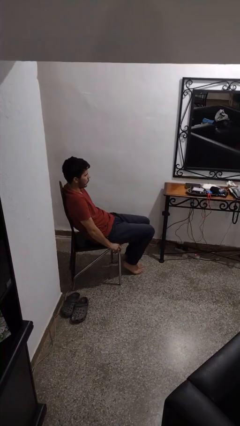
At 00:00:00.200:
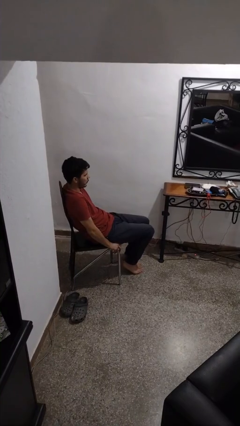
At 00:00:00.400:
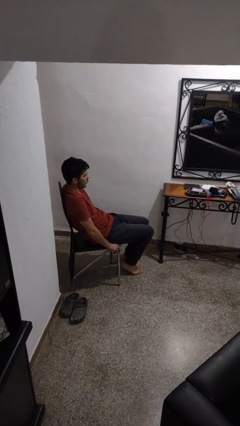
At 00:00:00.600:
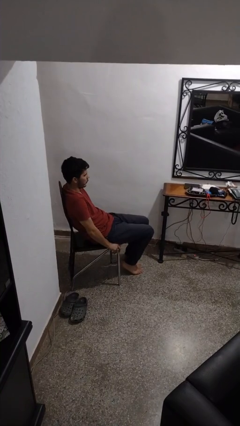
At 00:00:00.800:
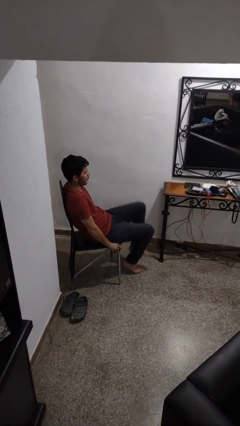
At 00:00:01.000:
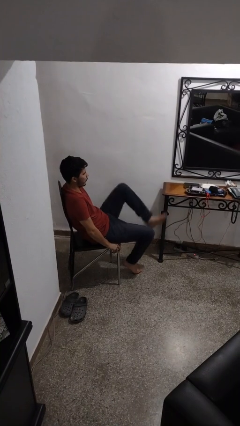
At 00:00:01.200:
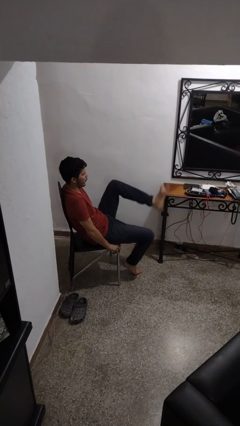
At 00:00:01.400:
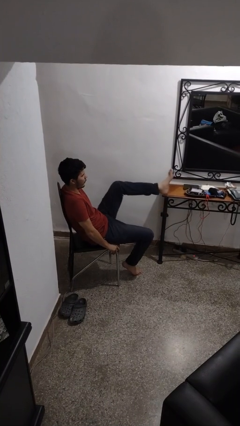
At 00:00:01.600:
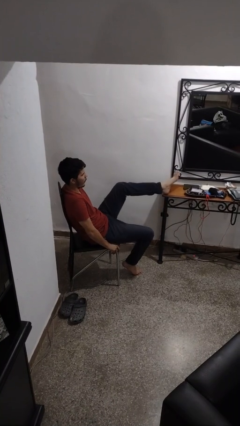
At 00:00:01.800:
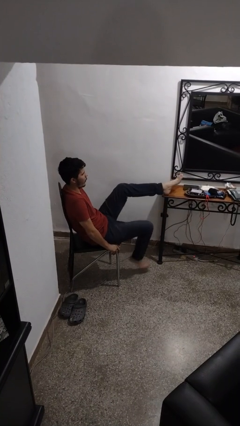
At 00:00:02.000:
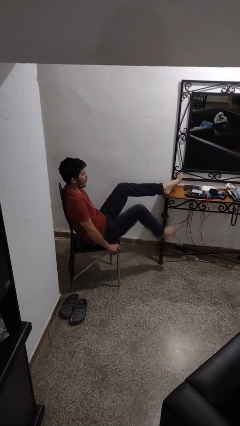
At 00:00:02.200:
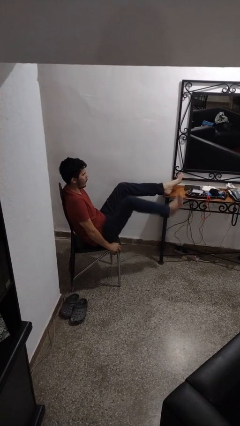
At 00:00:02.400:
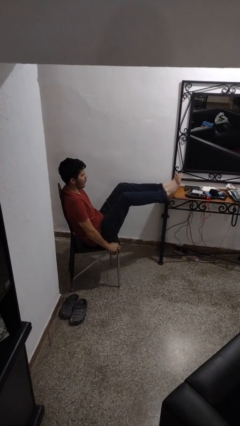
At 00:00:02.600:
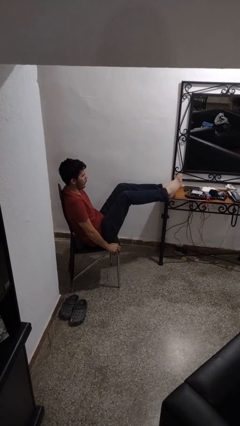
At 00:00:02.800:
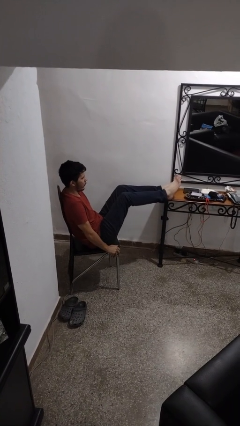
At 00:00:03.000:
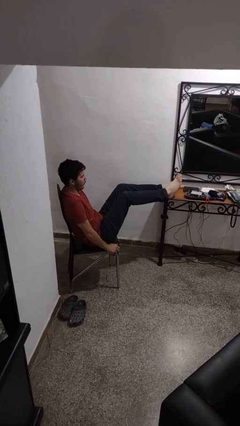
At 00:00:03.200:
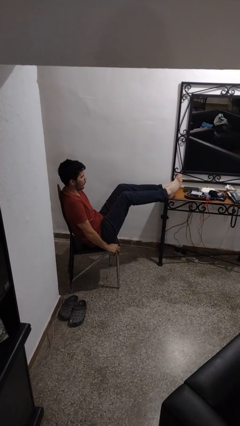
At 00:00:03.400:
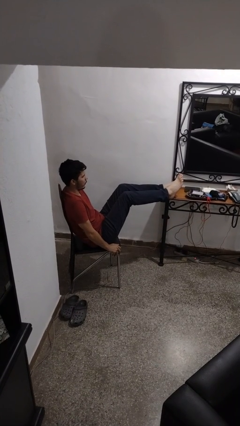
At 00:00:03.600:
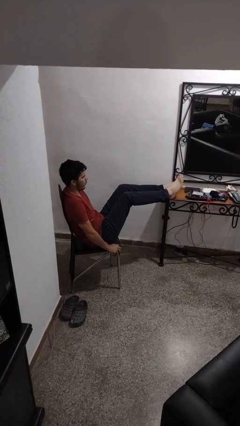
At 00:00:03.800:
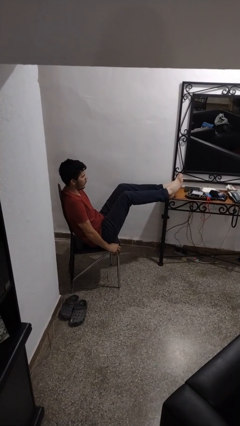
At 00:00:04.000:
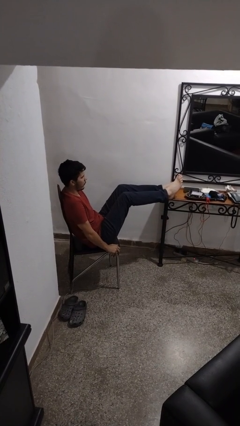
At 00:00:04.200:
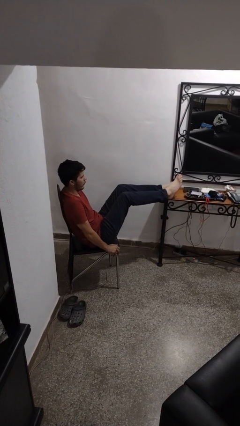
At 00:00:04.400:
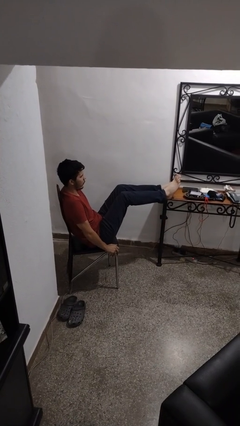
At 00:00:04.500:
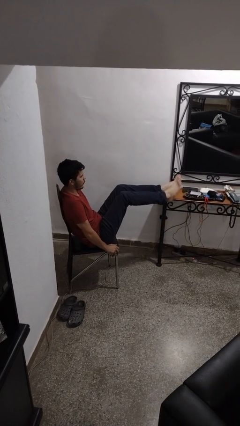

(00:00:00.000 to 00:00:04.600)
person puts feet up

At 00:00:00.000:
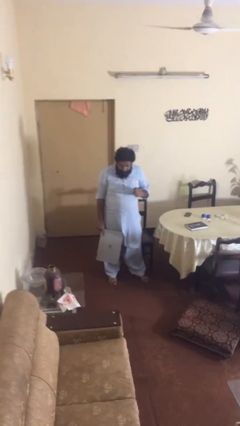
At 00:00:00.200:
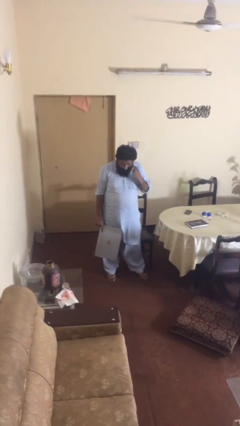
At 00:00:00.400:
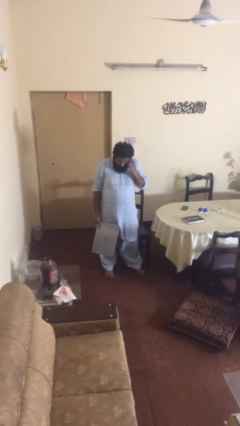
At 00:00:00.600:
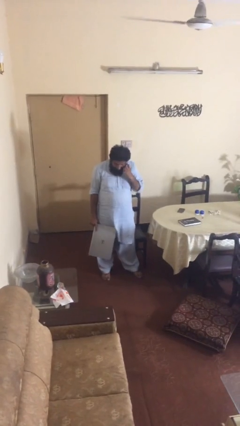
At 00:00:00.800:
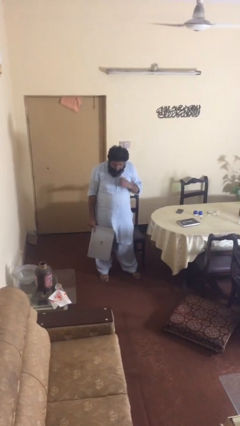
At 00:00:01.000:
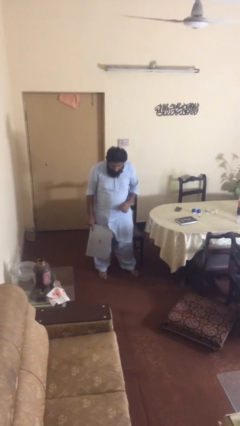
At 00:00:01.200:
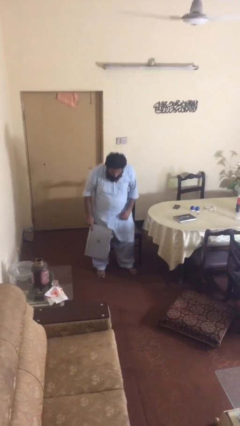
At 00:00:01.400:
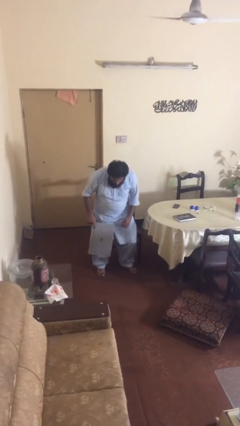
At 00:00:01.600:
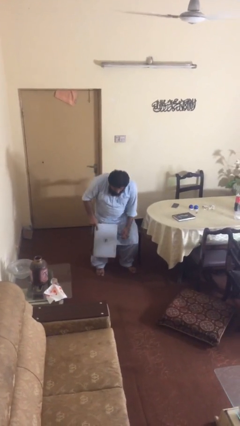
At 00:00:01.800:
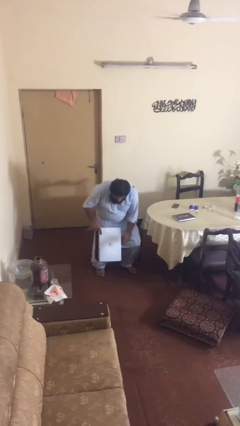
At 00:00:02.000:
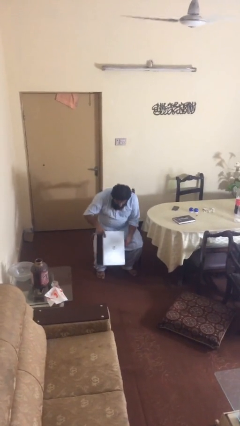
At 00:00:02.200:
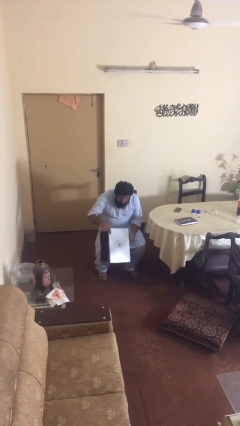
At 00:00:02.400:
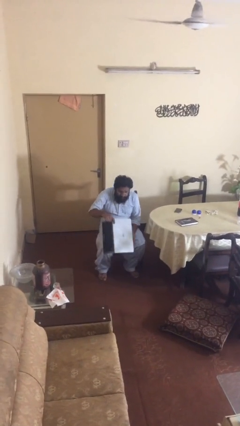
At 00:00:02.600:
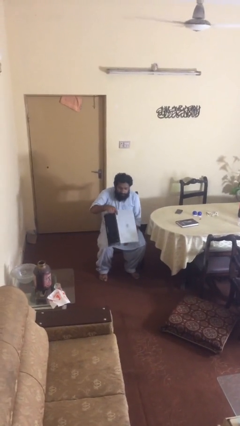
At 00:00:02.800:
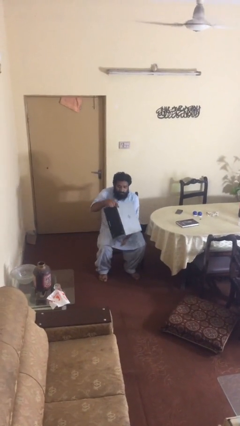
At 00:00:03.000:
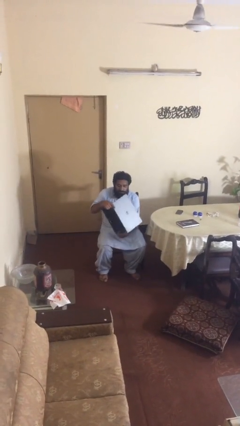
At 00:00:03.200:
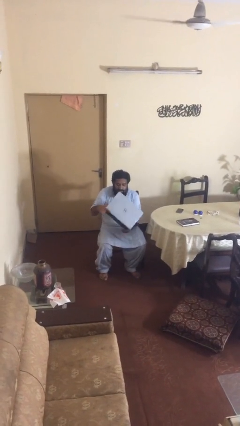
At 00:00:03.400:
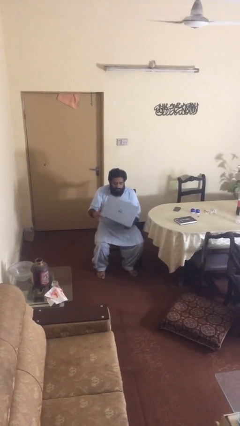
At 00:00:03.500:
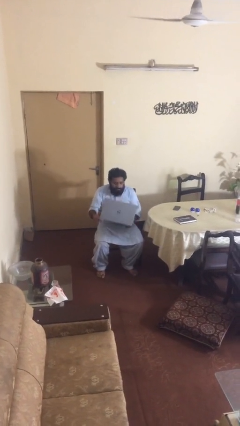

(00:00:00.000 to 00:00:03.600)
person sits down

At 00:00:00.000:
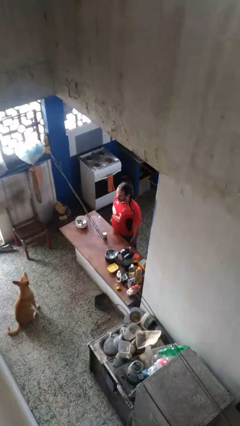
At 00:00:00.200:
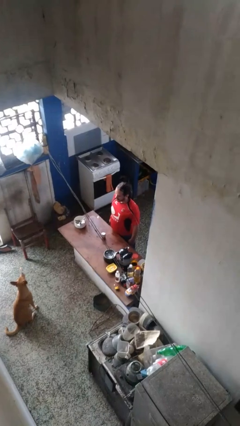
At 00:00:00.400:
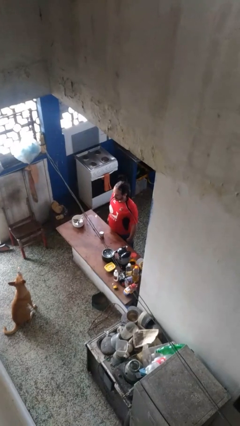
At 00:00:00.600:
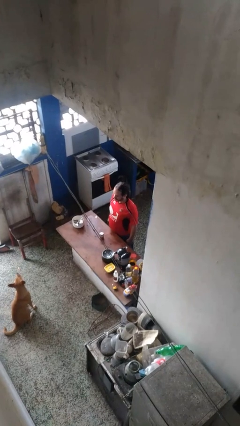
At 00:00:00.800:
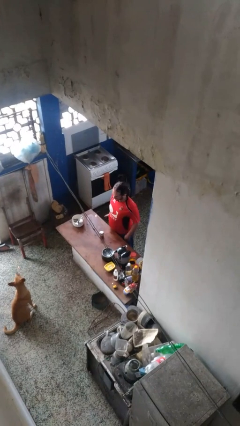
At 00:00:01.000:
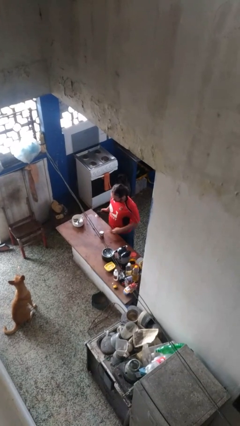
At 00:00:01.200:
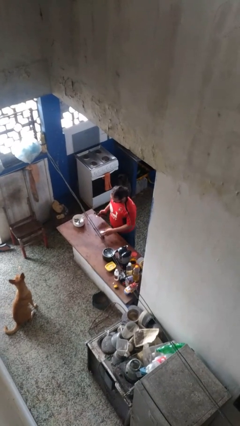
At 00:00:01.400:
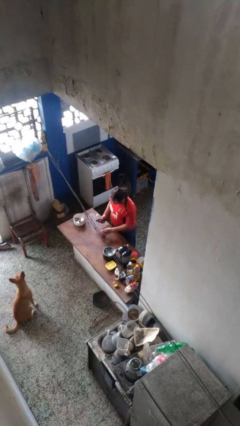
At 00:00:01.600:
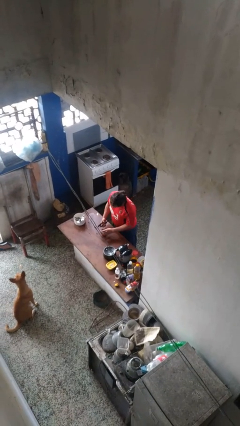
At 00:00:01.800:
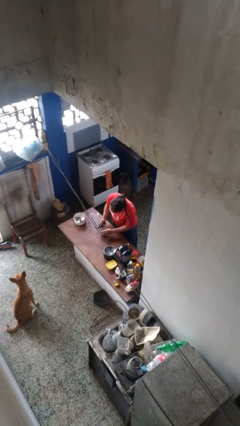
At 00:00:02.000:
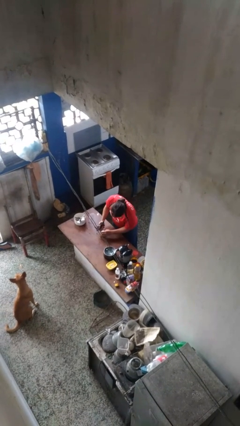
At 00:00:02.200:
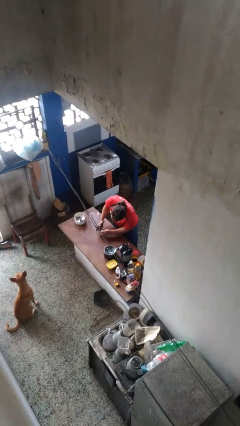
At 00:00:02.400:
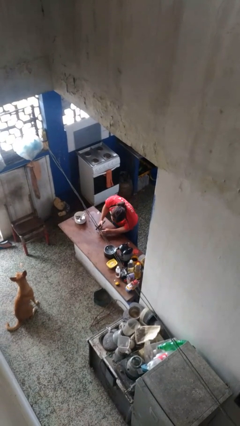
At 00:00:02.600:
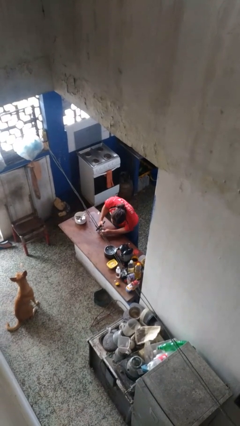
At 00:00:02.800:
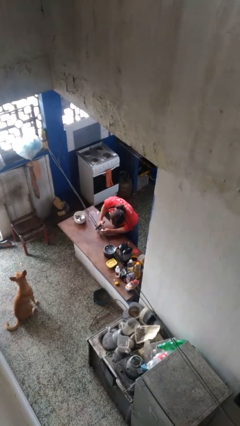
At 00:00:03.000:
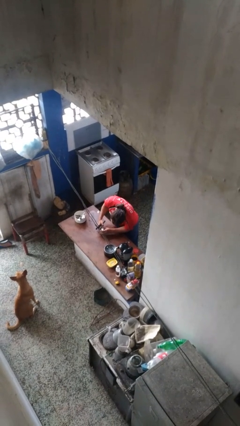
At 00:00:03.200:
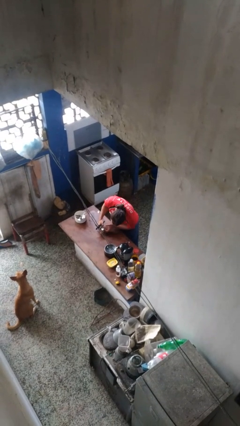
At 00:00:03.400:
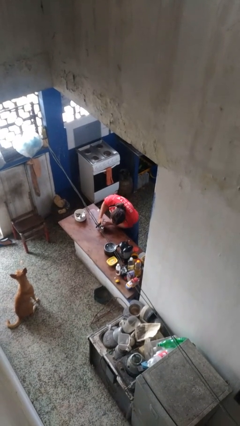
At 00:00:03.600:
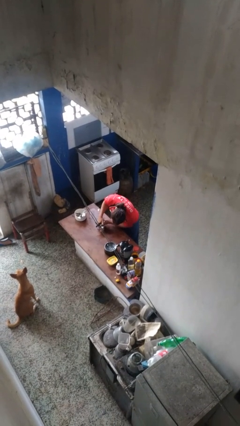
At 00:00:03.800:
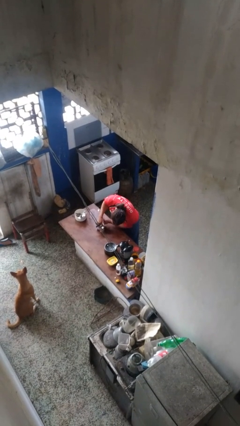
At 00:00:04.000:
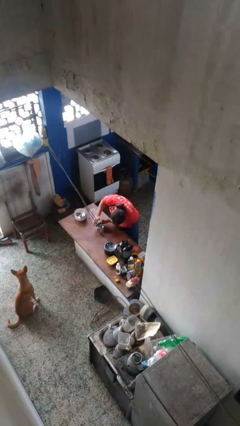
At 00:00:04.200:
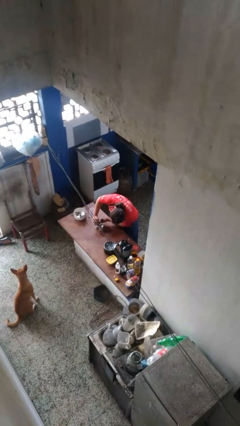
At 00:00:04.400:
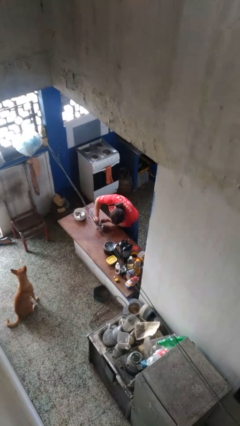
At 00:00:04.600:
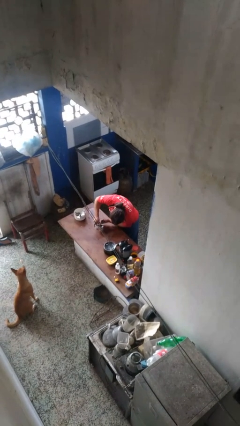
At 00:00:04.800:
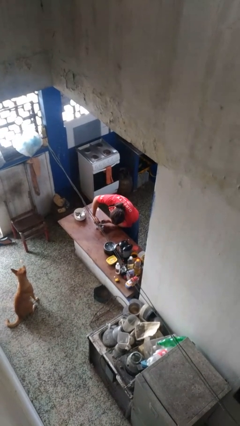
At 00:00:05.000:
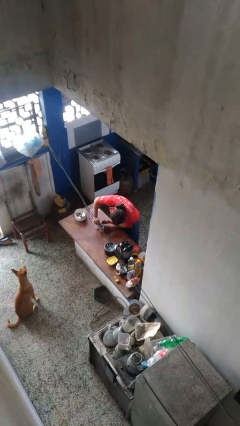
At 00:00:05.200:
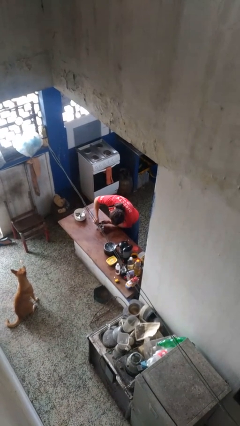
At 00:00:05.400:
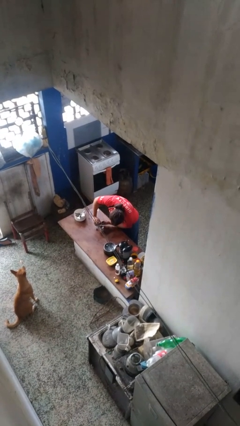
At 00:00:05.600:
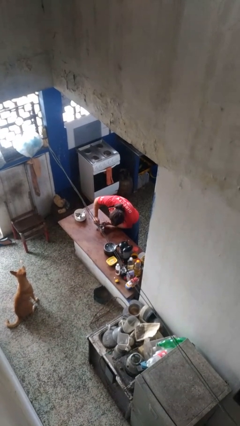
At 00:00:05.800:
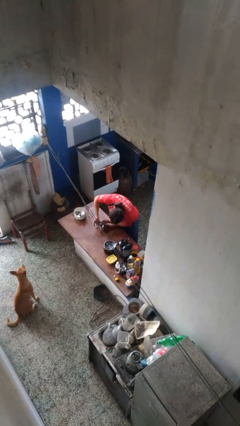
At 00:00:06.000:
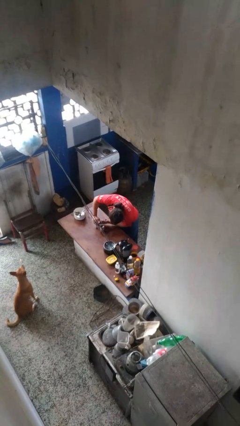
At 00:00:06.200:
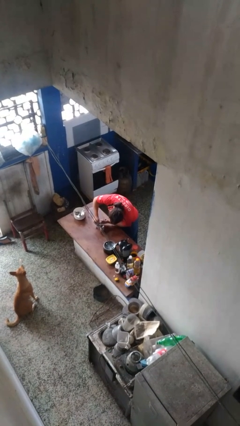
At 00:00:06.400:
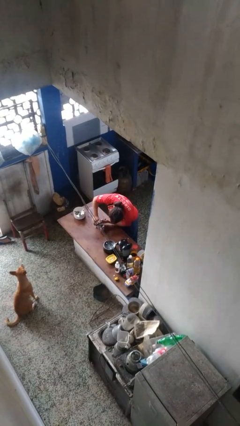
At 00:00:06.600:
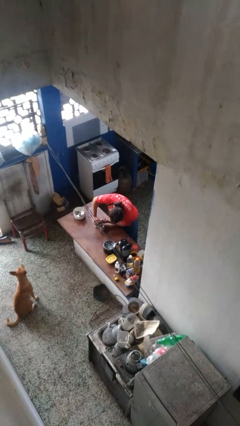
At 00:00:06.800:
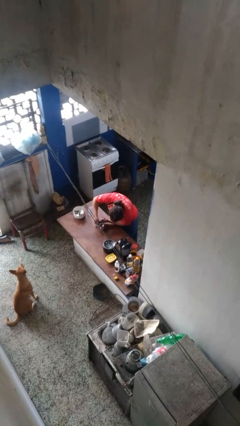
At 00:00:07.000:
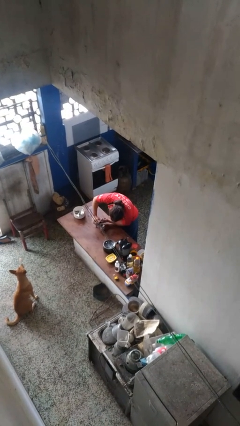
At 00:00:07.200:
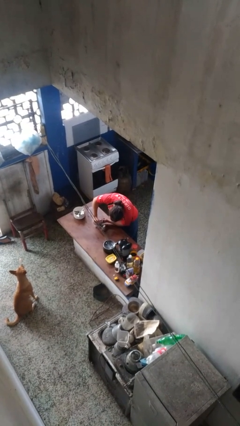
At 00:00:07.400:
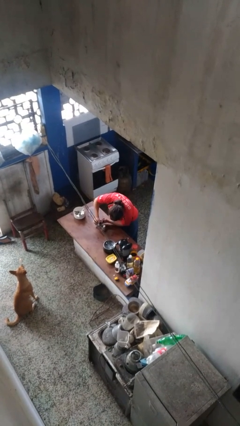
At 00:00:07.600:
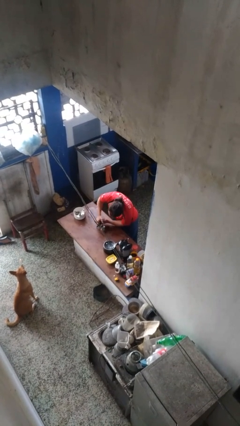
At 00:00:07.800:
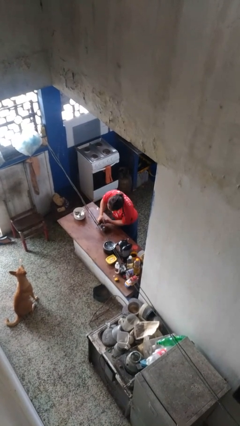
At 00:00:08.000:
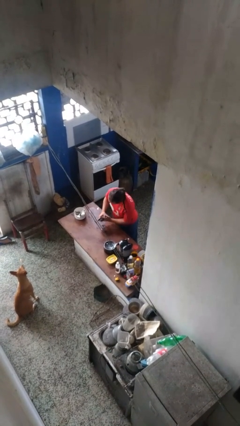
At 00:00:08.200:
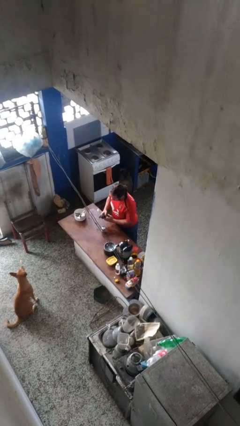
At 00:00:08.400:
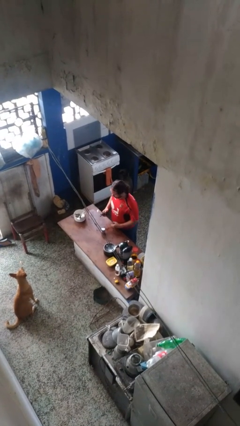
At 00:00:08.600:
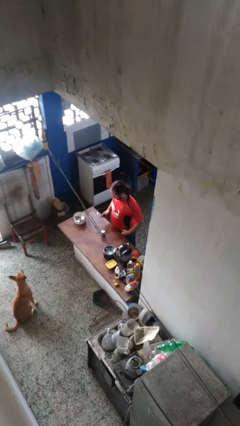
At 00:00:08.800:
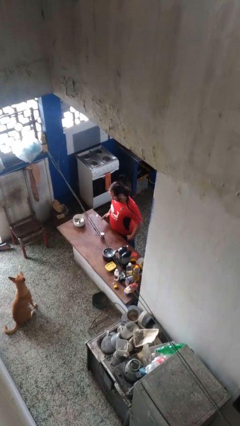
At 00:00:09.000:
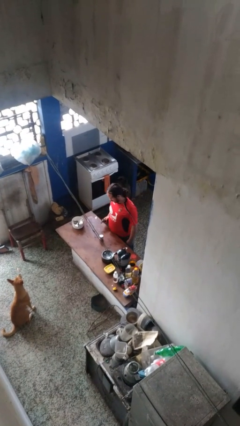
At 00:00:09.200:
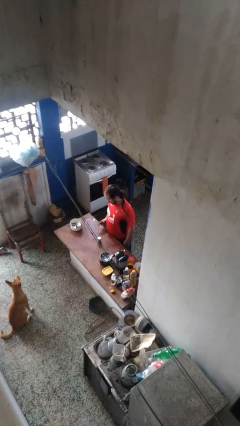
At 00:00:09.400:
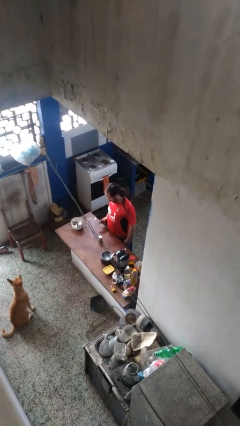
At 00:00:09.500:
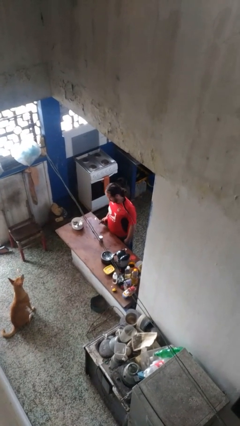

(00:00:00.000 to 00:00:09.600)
person opens can with can opener
